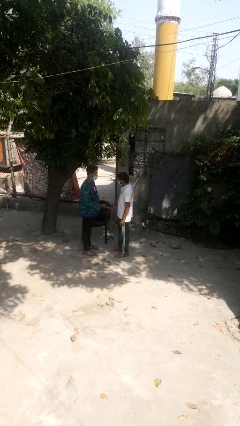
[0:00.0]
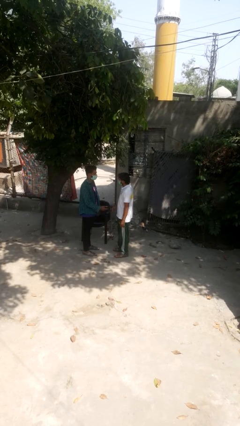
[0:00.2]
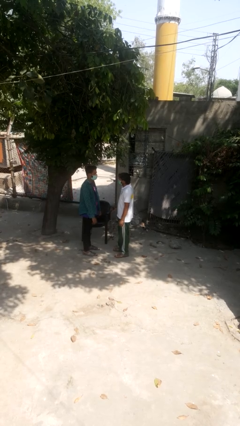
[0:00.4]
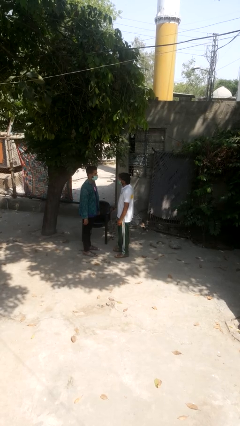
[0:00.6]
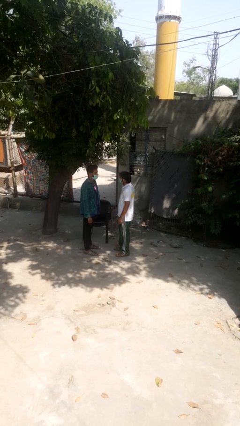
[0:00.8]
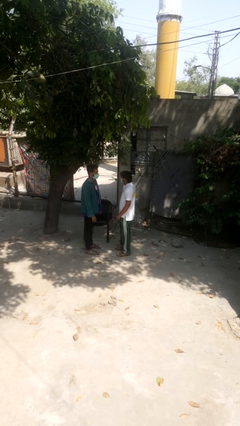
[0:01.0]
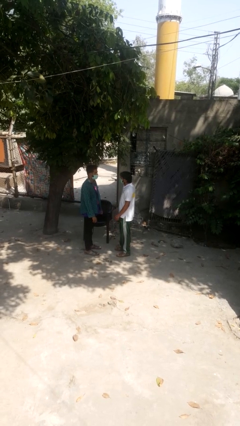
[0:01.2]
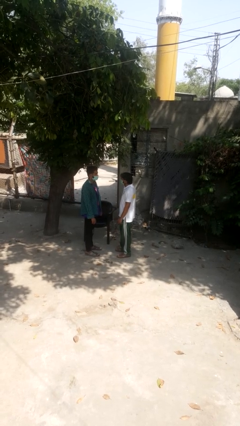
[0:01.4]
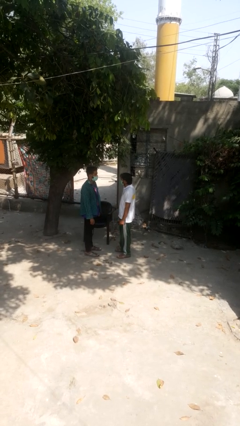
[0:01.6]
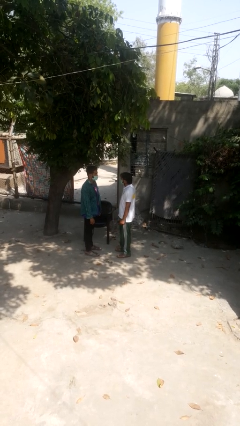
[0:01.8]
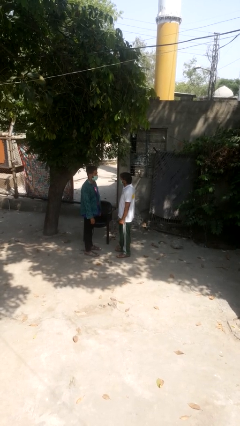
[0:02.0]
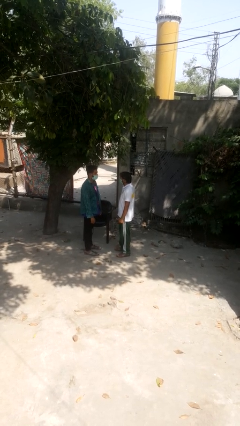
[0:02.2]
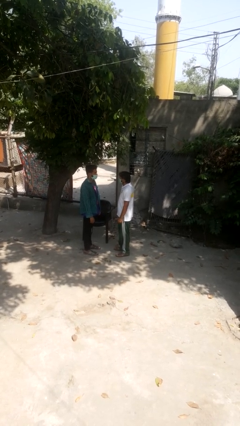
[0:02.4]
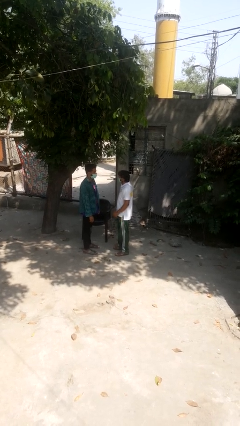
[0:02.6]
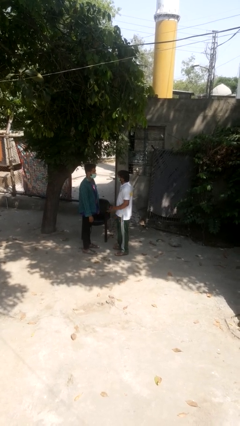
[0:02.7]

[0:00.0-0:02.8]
person highfives hand

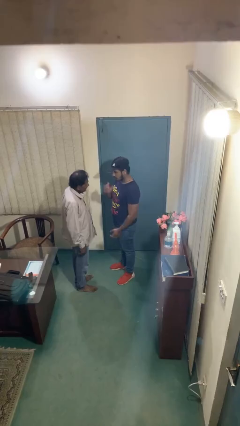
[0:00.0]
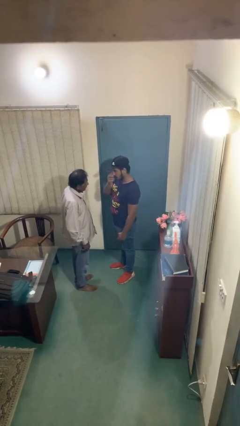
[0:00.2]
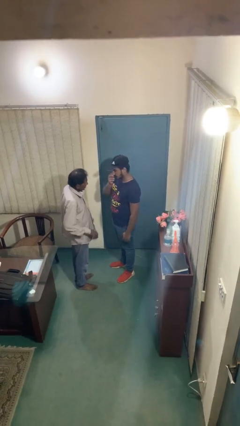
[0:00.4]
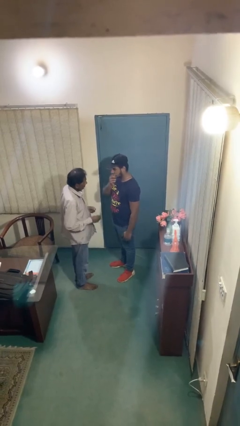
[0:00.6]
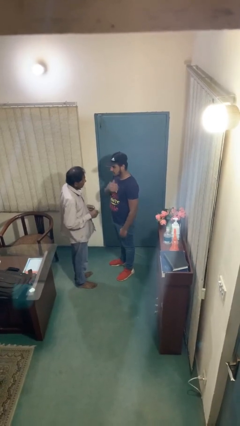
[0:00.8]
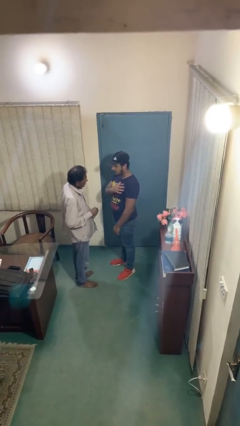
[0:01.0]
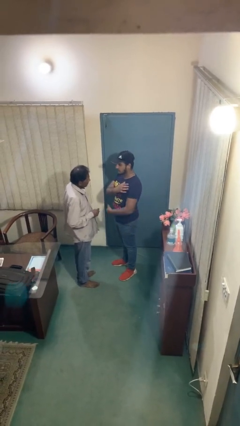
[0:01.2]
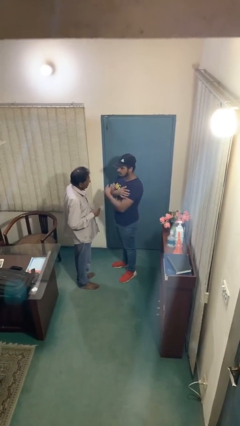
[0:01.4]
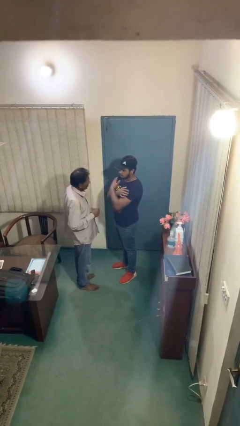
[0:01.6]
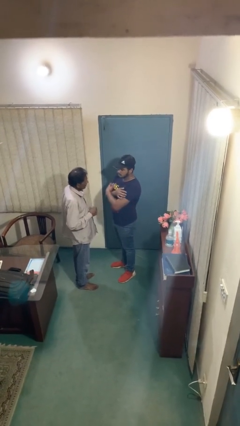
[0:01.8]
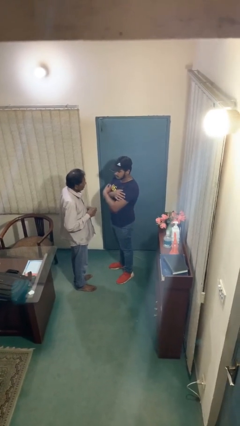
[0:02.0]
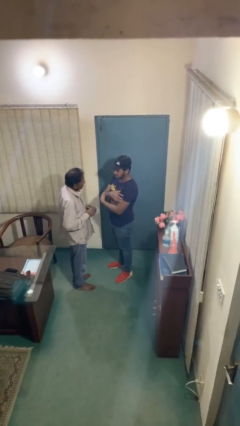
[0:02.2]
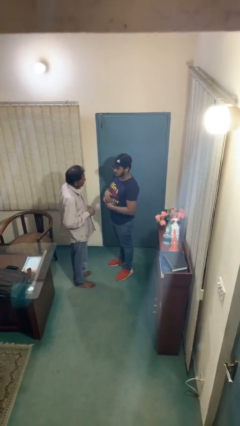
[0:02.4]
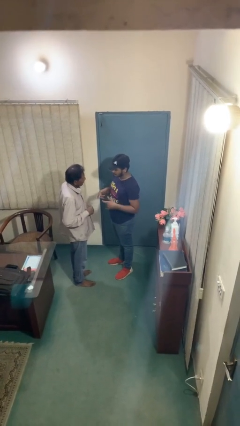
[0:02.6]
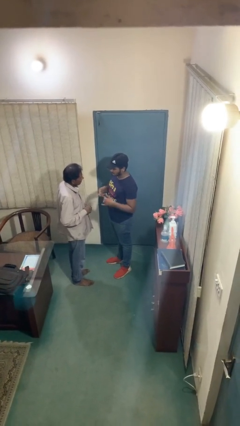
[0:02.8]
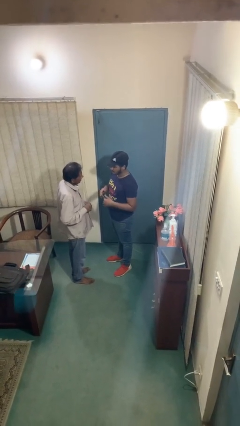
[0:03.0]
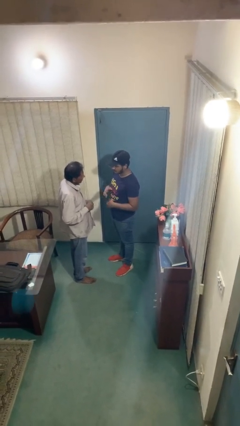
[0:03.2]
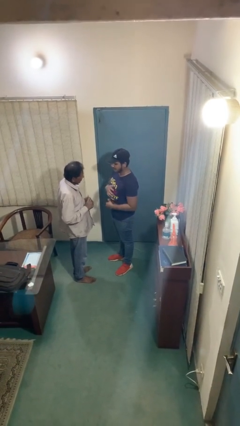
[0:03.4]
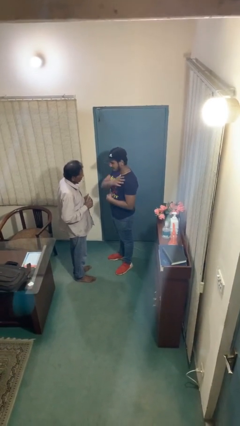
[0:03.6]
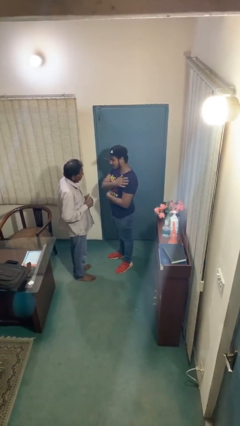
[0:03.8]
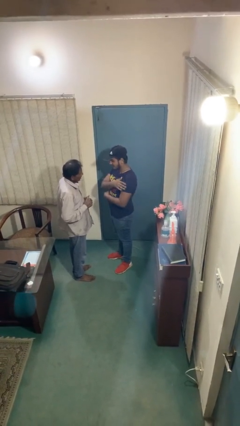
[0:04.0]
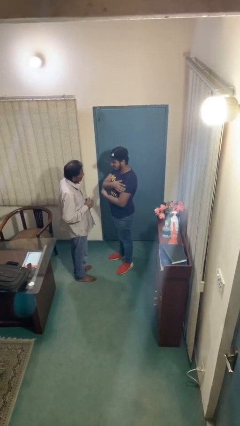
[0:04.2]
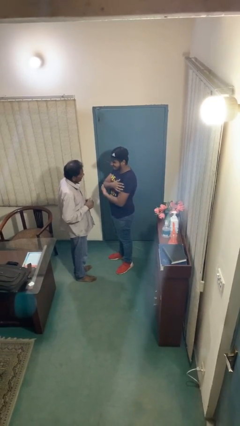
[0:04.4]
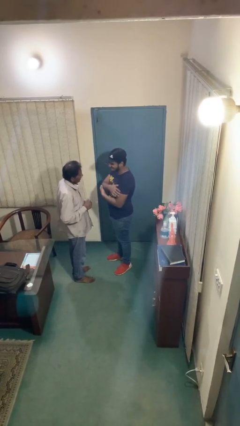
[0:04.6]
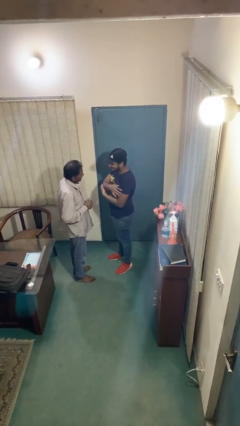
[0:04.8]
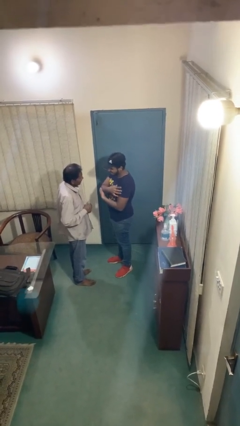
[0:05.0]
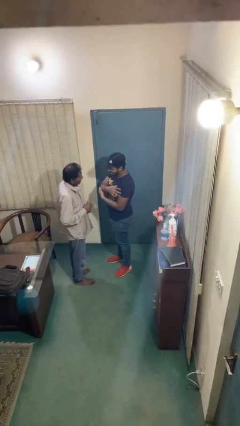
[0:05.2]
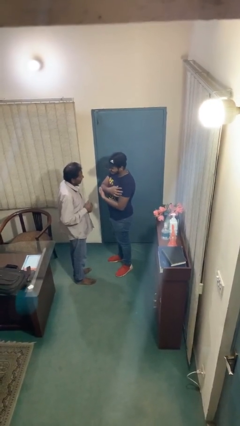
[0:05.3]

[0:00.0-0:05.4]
person talks to person

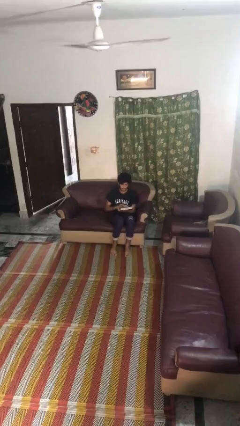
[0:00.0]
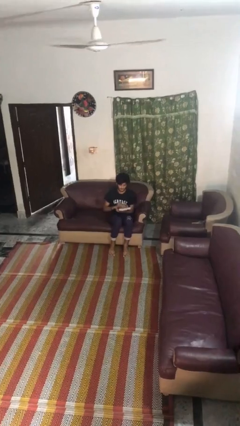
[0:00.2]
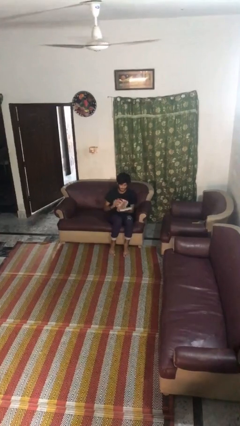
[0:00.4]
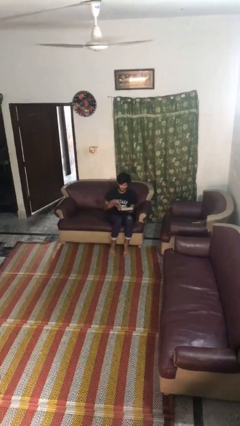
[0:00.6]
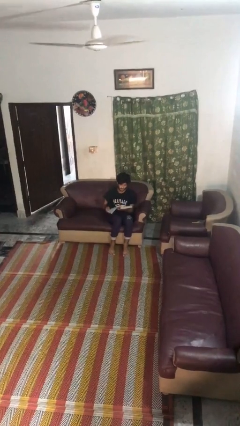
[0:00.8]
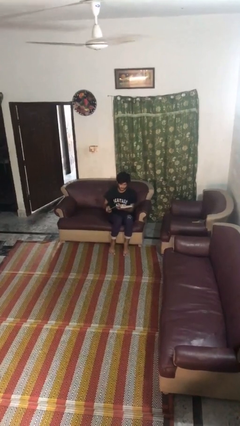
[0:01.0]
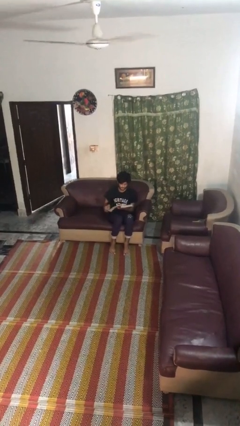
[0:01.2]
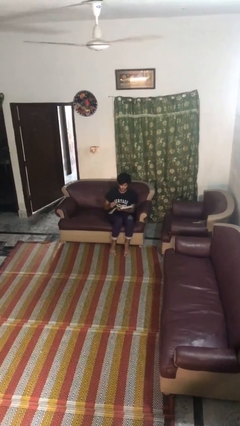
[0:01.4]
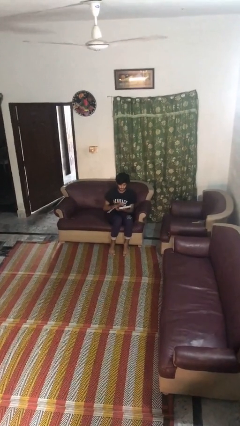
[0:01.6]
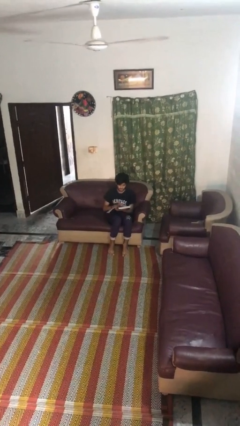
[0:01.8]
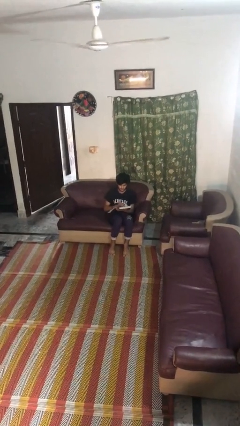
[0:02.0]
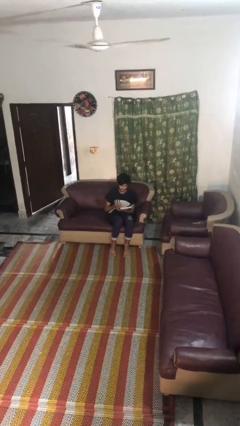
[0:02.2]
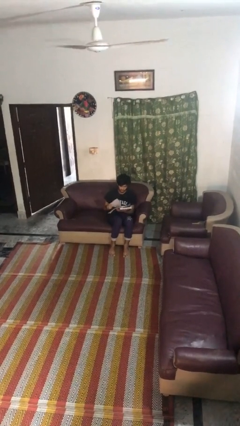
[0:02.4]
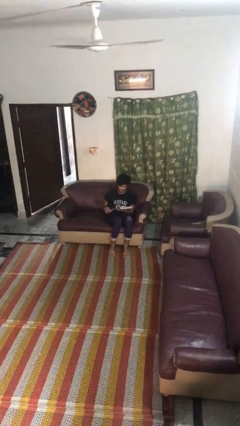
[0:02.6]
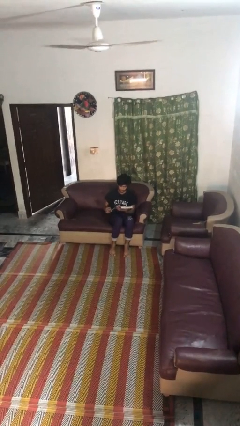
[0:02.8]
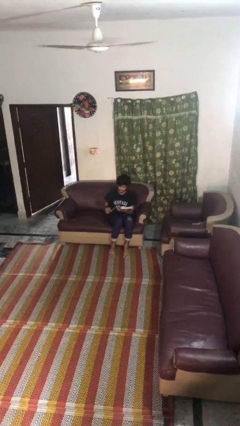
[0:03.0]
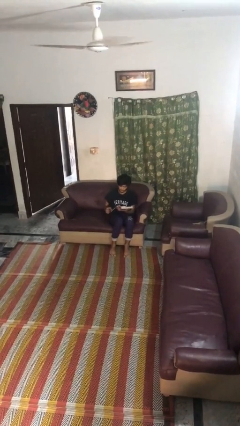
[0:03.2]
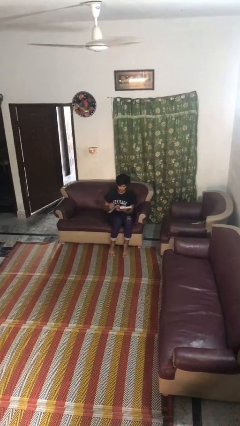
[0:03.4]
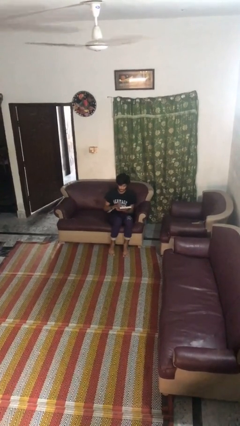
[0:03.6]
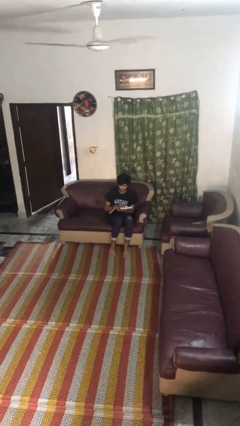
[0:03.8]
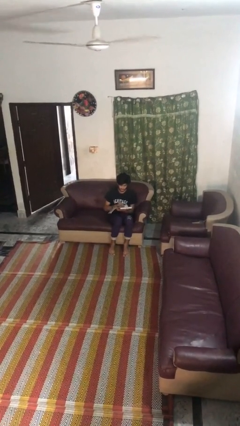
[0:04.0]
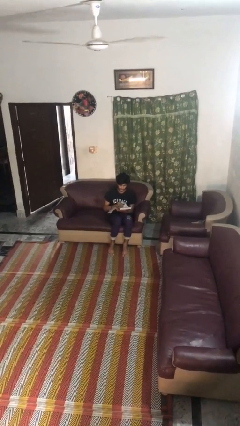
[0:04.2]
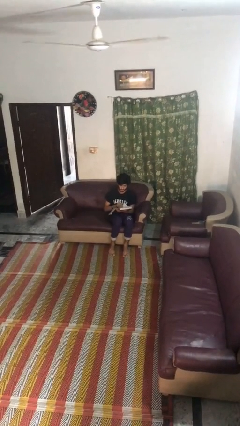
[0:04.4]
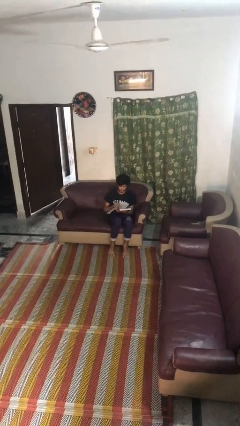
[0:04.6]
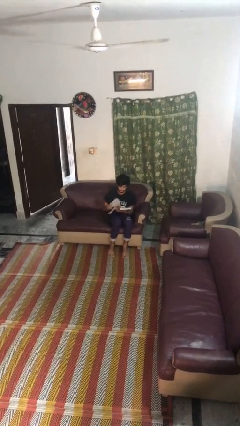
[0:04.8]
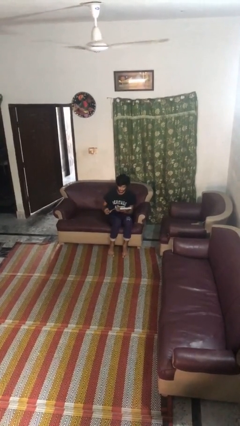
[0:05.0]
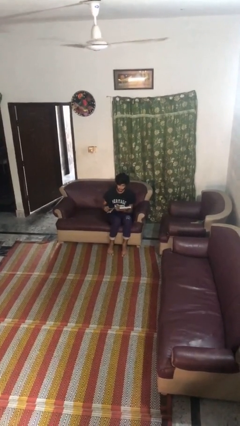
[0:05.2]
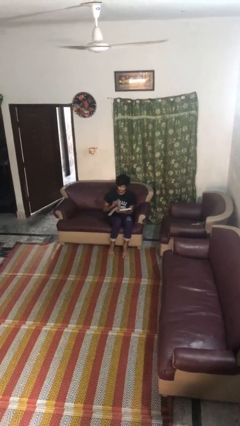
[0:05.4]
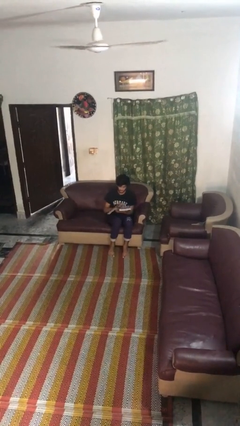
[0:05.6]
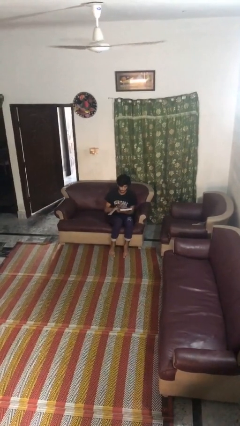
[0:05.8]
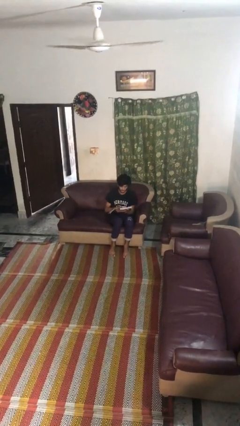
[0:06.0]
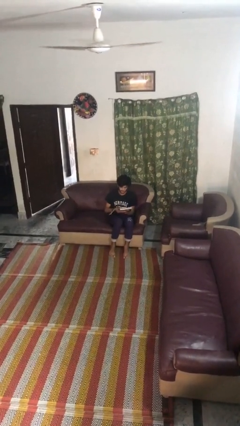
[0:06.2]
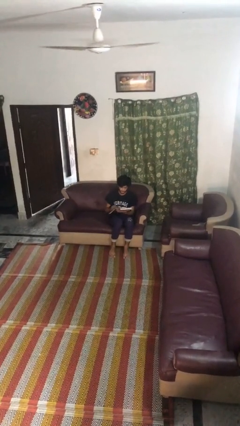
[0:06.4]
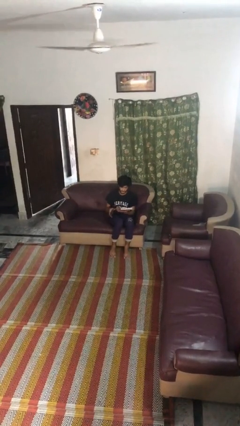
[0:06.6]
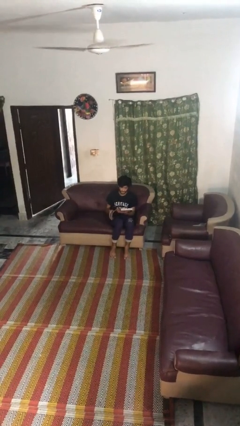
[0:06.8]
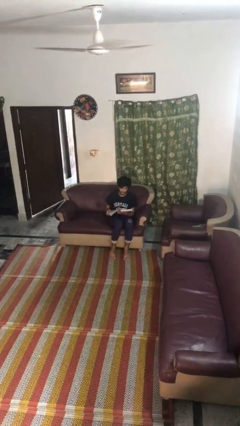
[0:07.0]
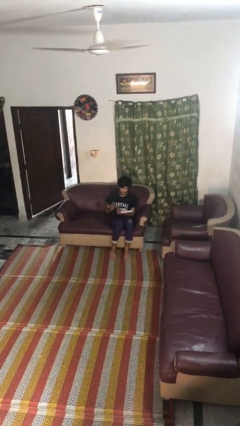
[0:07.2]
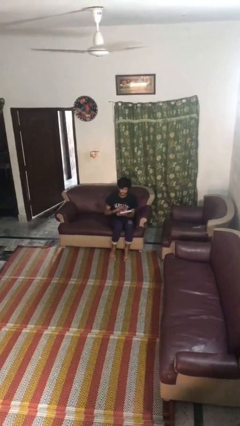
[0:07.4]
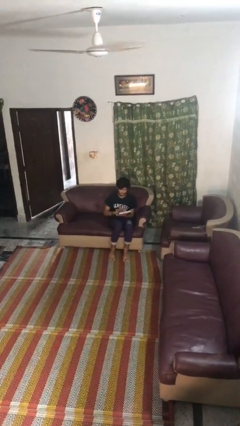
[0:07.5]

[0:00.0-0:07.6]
person reads book

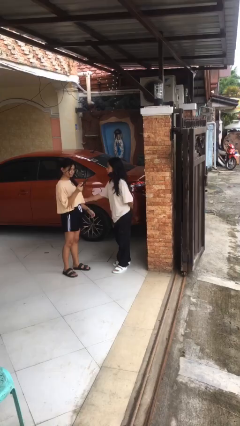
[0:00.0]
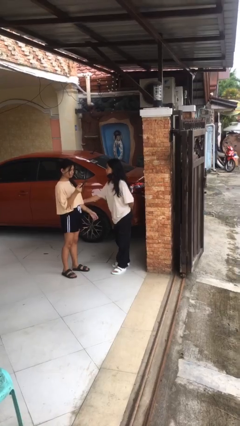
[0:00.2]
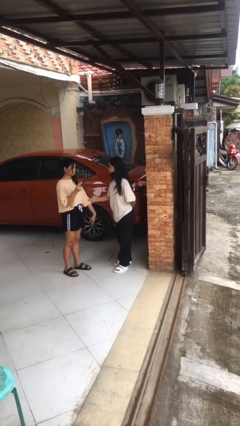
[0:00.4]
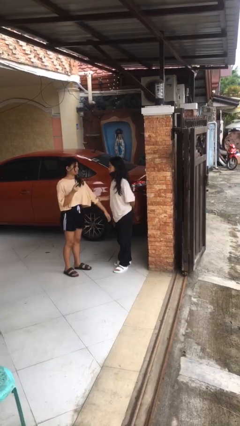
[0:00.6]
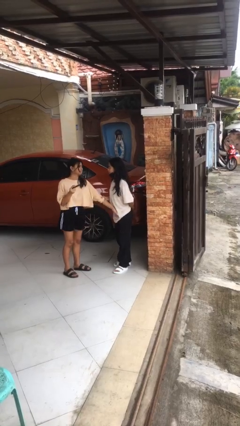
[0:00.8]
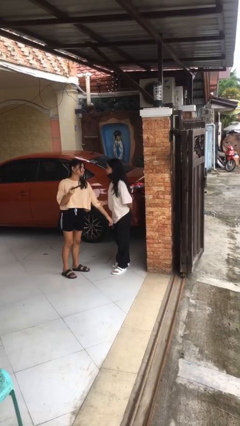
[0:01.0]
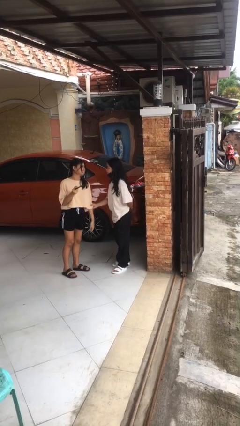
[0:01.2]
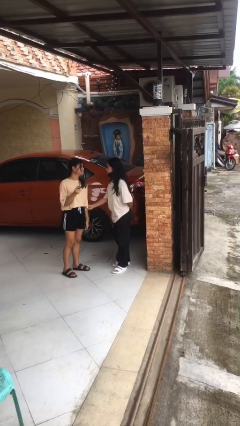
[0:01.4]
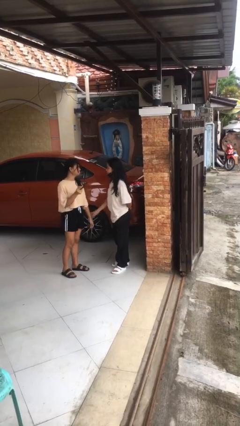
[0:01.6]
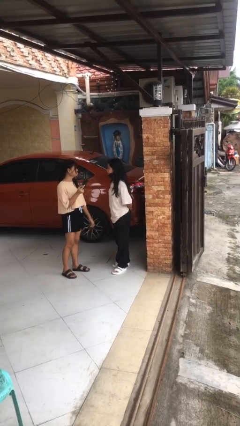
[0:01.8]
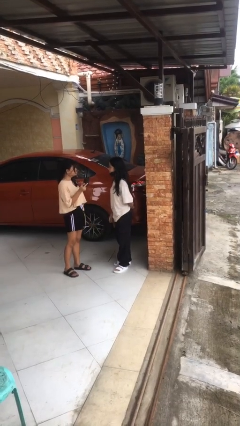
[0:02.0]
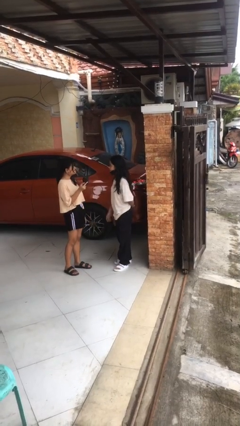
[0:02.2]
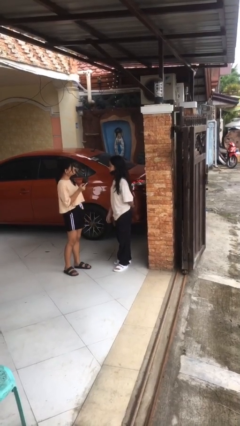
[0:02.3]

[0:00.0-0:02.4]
person grabs person by forearm
